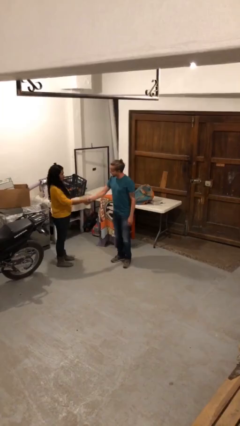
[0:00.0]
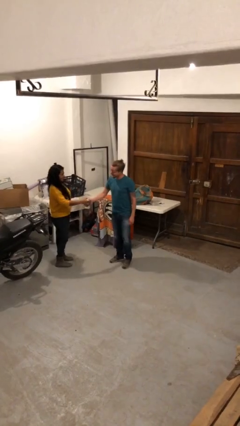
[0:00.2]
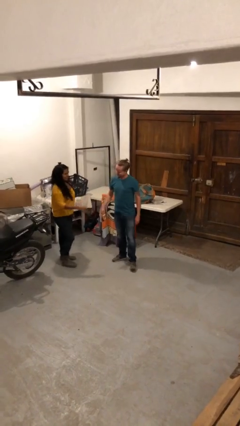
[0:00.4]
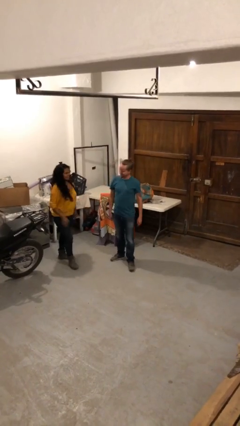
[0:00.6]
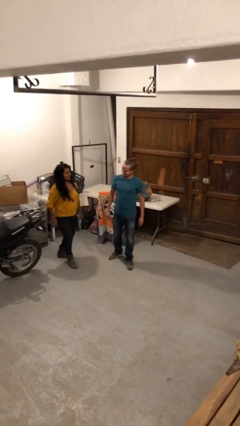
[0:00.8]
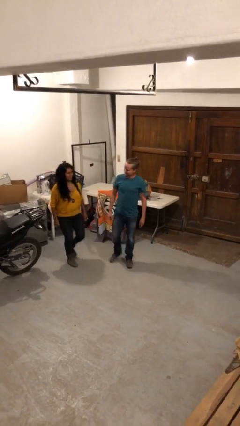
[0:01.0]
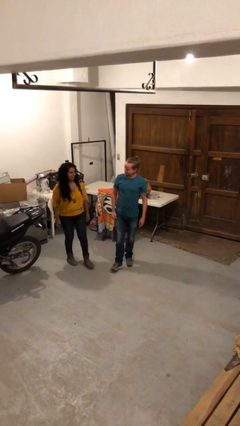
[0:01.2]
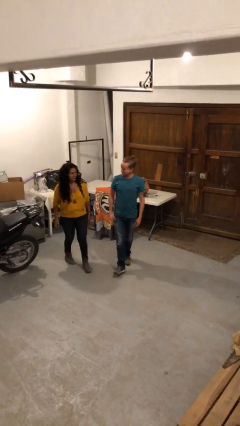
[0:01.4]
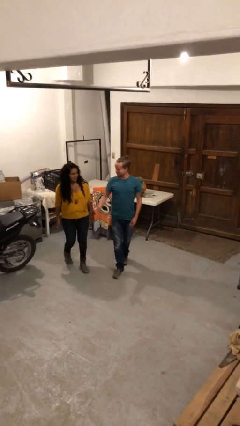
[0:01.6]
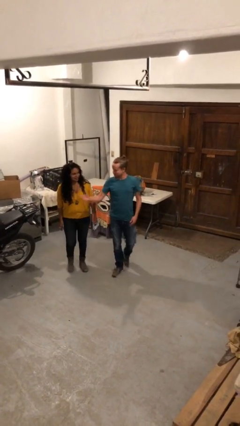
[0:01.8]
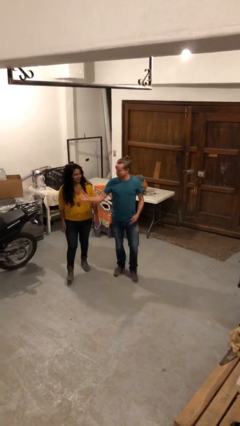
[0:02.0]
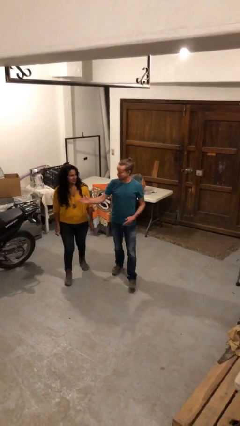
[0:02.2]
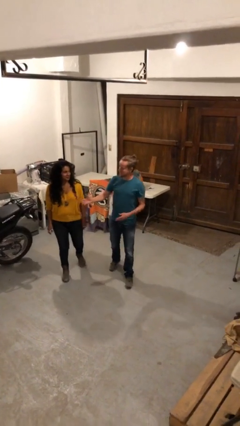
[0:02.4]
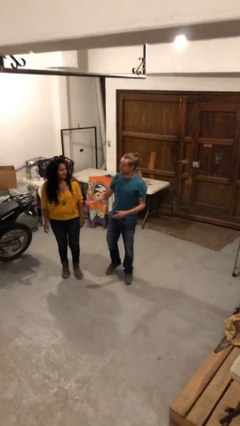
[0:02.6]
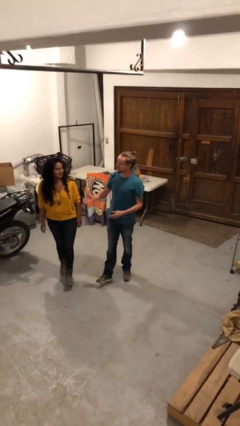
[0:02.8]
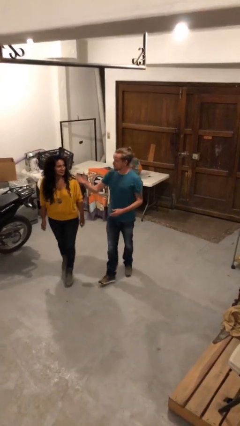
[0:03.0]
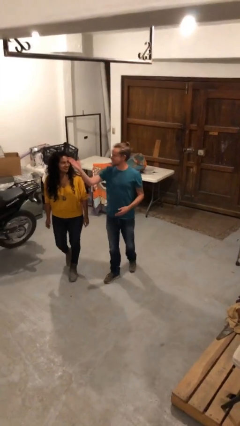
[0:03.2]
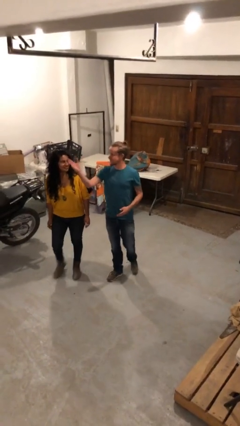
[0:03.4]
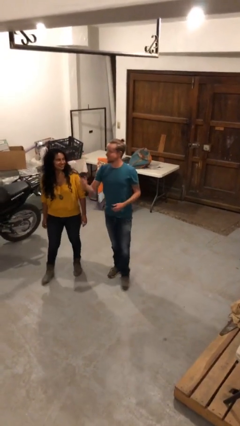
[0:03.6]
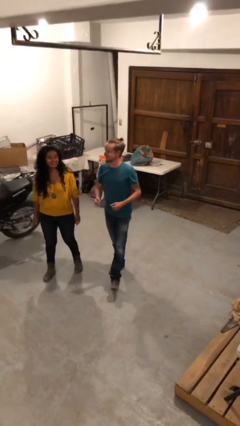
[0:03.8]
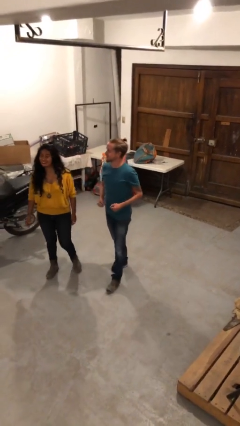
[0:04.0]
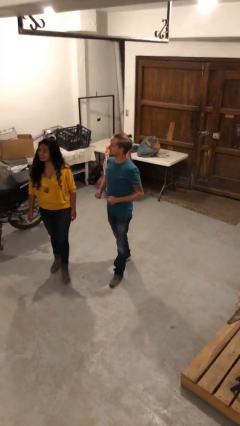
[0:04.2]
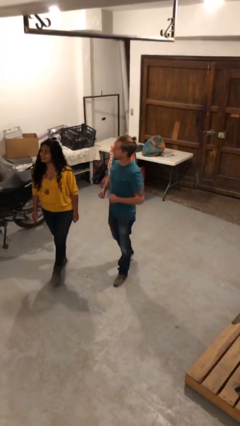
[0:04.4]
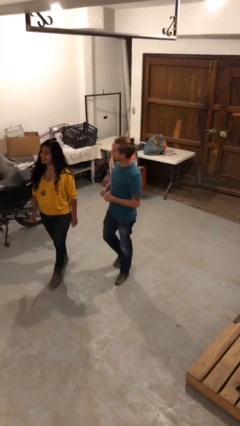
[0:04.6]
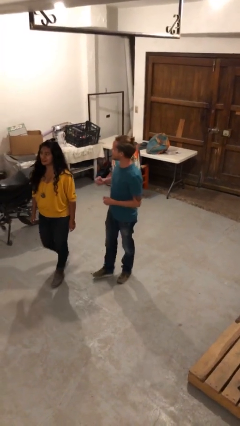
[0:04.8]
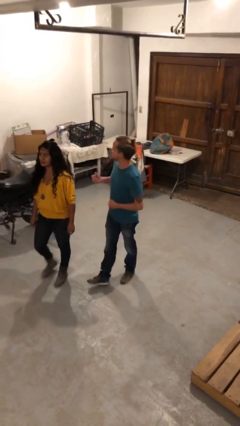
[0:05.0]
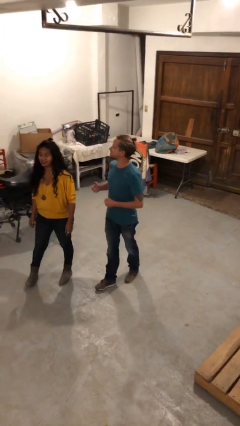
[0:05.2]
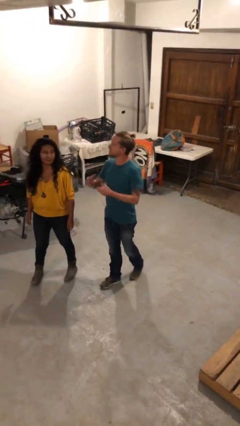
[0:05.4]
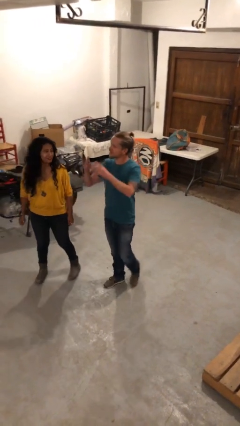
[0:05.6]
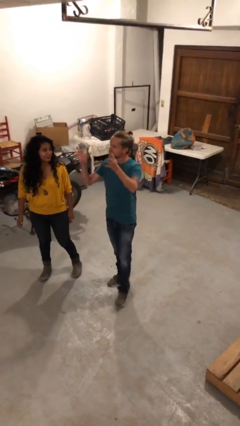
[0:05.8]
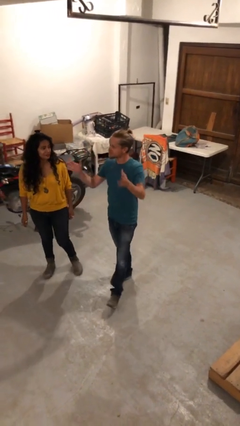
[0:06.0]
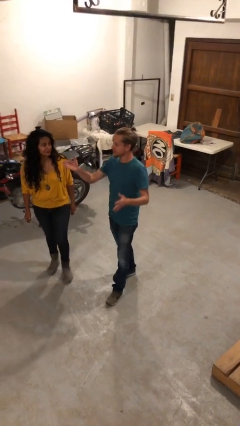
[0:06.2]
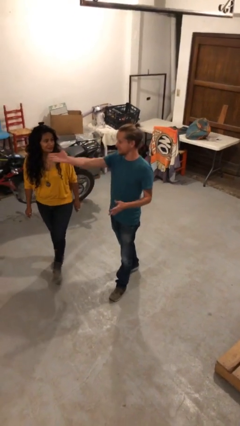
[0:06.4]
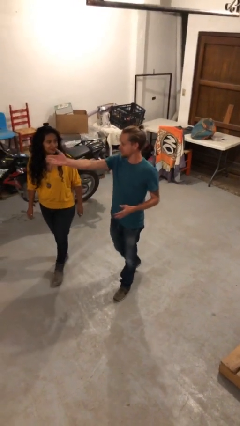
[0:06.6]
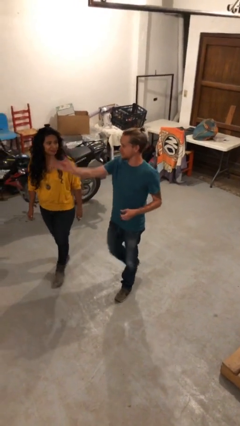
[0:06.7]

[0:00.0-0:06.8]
person talks to person

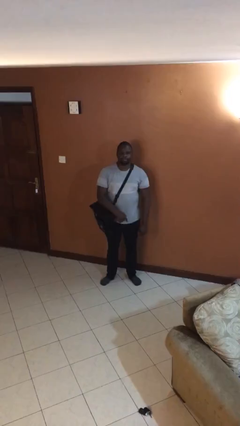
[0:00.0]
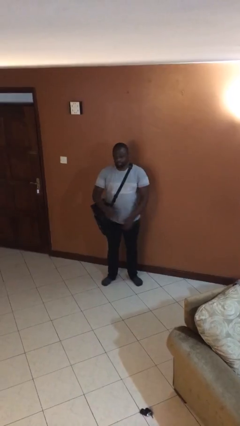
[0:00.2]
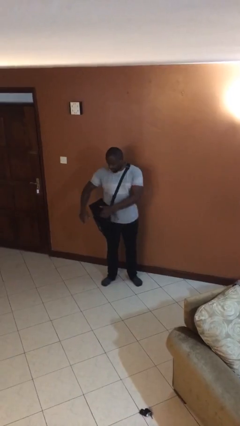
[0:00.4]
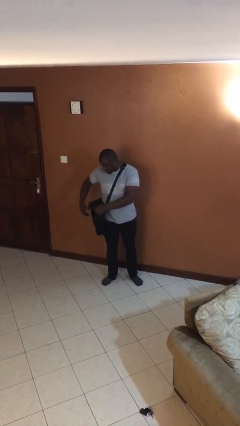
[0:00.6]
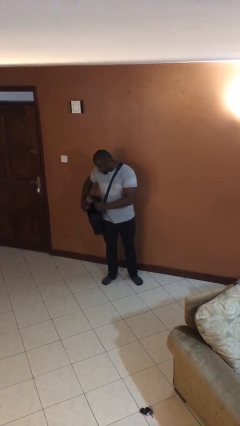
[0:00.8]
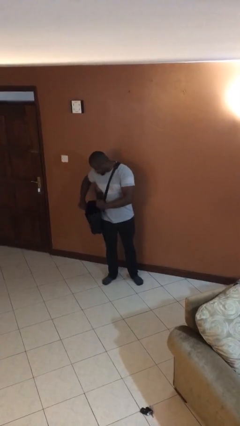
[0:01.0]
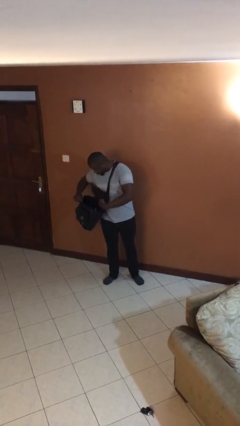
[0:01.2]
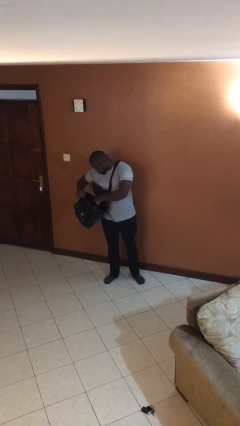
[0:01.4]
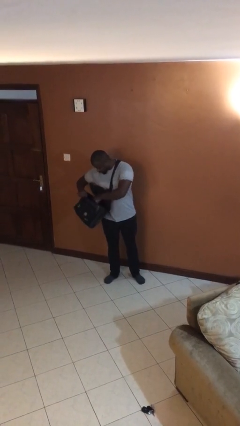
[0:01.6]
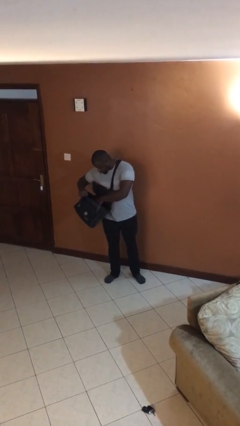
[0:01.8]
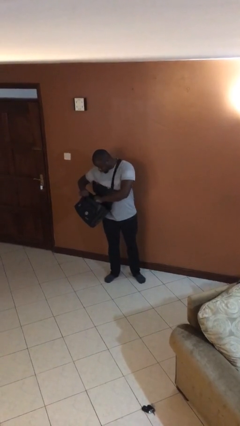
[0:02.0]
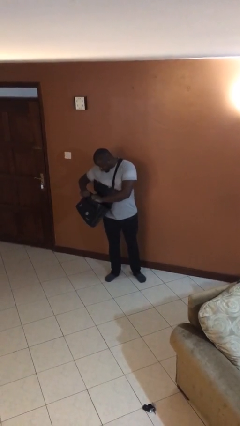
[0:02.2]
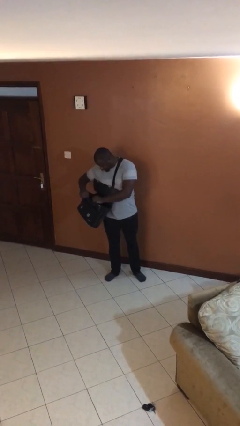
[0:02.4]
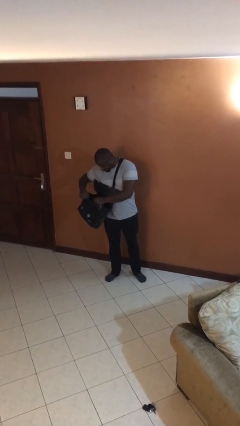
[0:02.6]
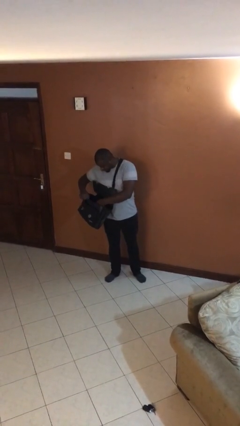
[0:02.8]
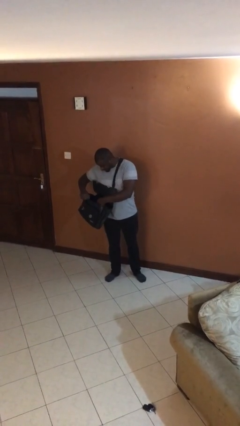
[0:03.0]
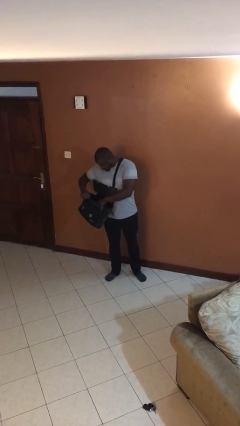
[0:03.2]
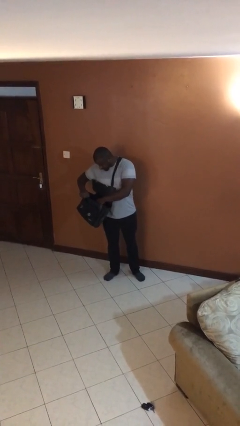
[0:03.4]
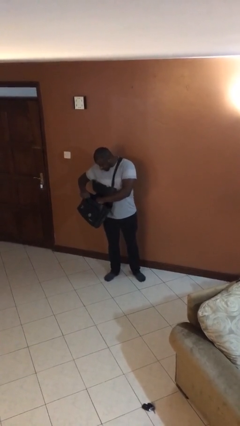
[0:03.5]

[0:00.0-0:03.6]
person searches in purse

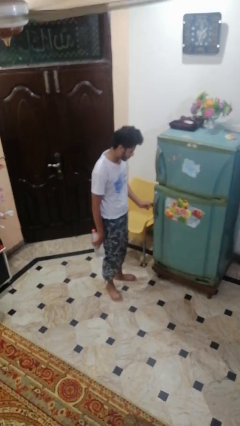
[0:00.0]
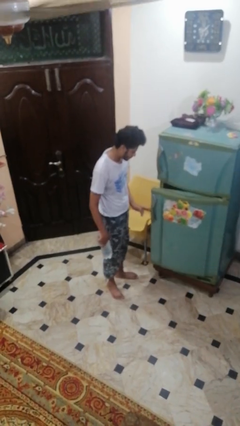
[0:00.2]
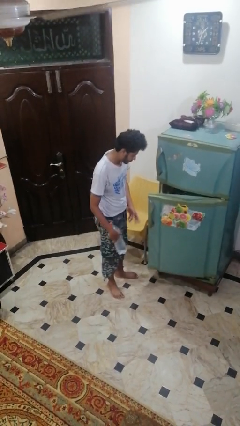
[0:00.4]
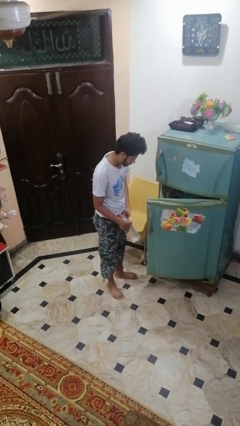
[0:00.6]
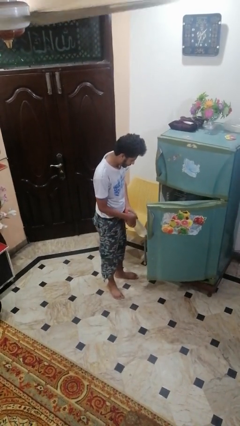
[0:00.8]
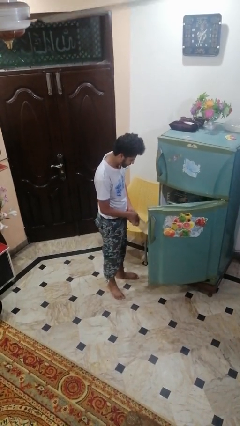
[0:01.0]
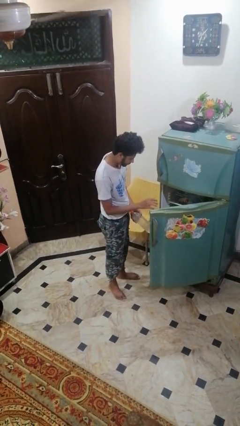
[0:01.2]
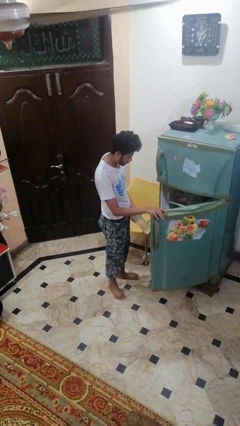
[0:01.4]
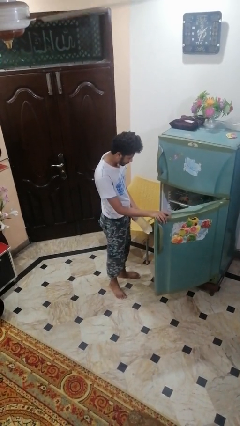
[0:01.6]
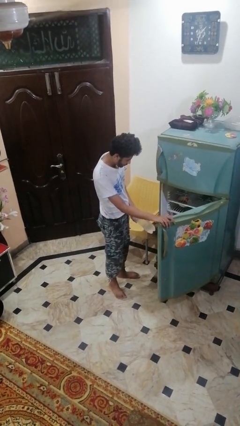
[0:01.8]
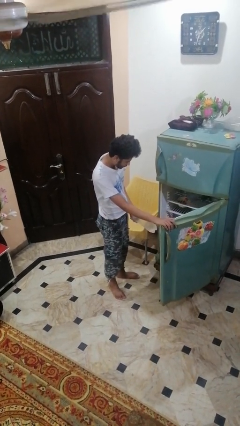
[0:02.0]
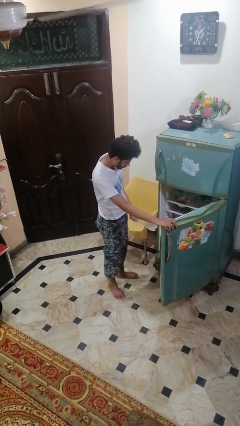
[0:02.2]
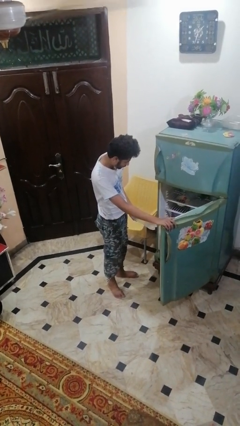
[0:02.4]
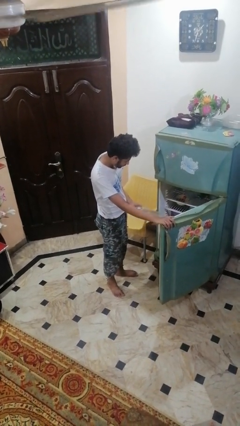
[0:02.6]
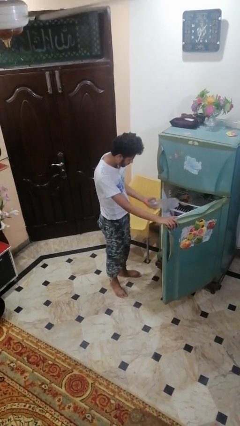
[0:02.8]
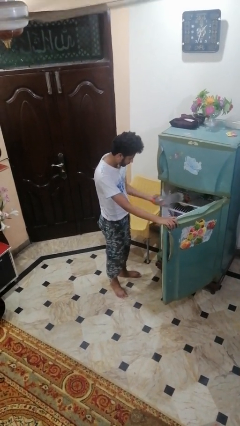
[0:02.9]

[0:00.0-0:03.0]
person opens refrigerator

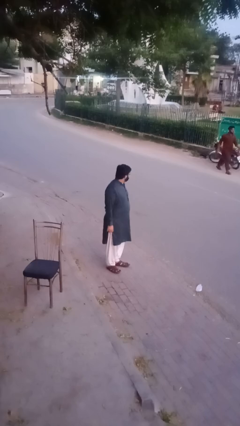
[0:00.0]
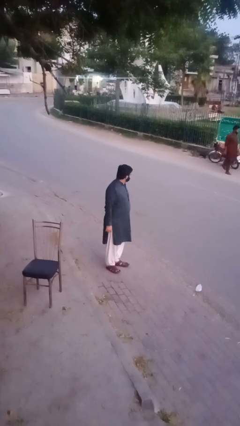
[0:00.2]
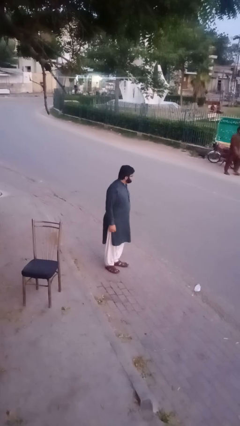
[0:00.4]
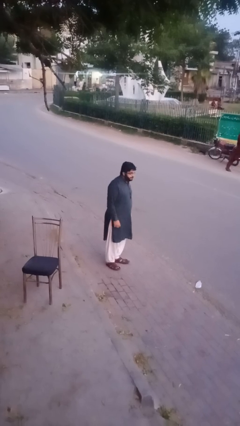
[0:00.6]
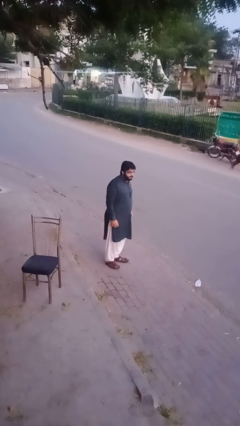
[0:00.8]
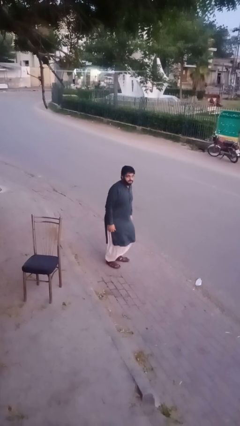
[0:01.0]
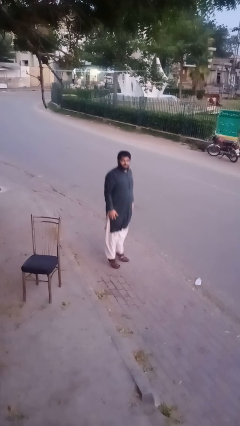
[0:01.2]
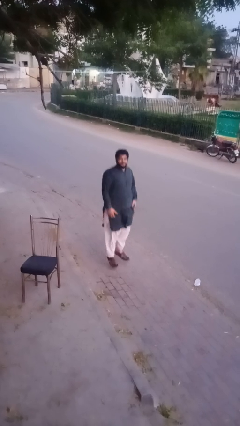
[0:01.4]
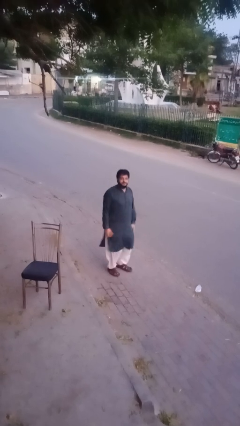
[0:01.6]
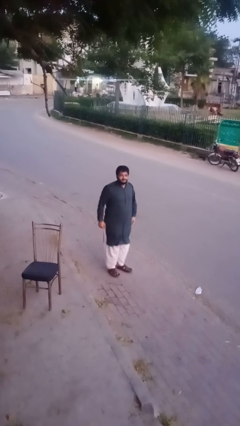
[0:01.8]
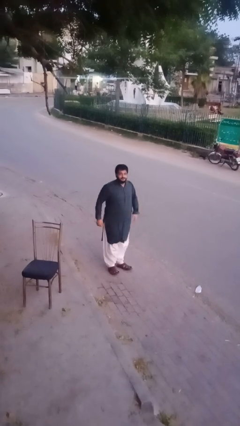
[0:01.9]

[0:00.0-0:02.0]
person jumps

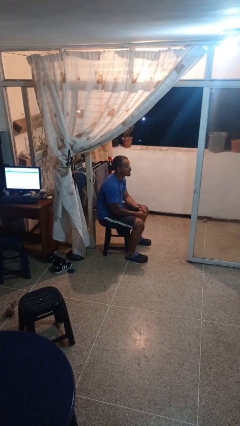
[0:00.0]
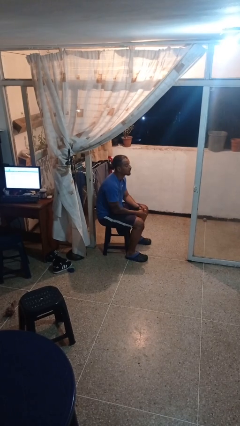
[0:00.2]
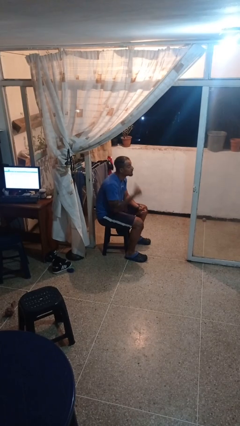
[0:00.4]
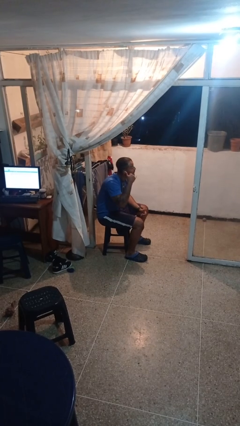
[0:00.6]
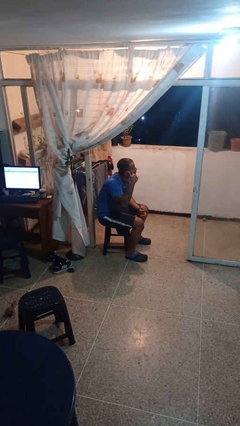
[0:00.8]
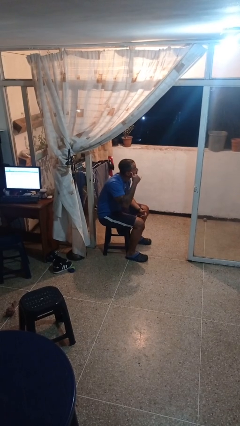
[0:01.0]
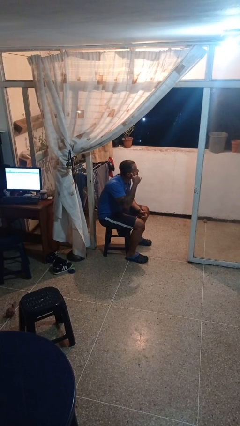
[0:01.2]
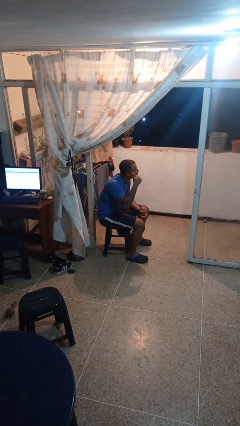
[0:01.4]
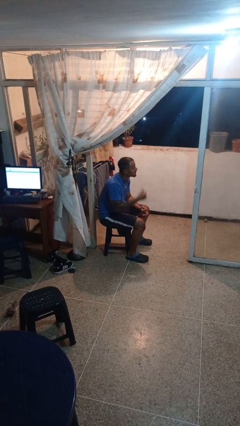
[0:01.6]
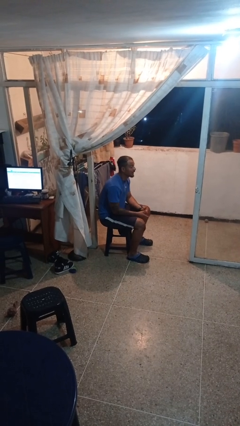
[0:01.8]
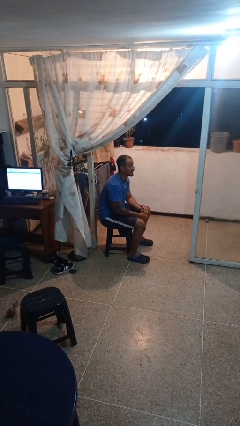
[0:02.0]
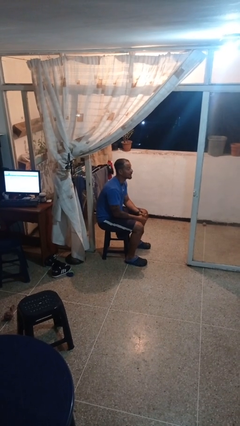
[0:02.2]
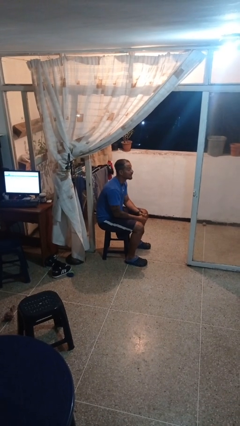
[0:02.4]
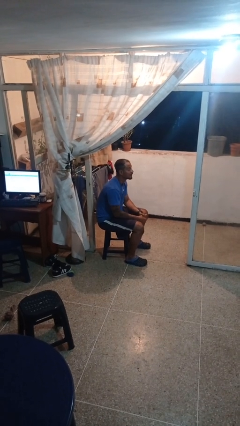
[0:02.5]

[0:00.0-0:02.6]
person gestures call me
